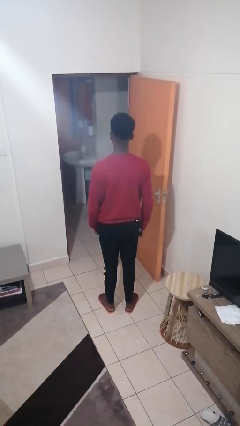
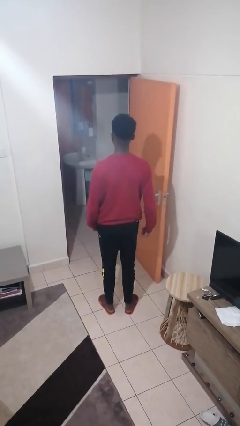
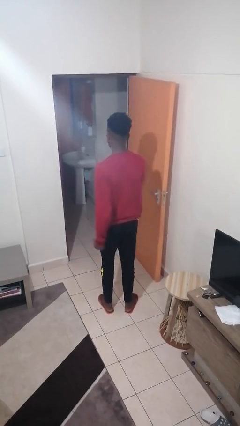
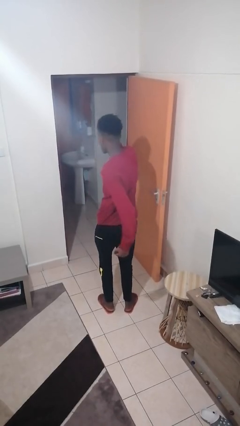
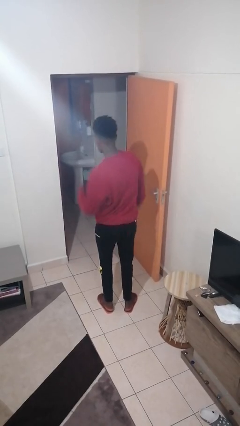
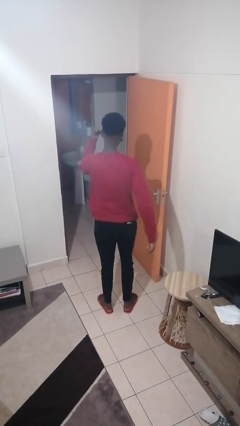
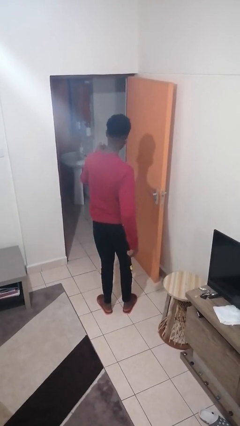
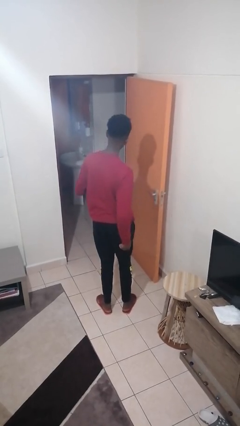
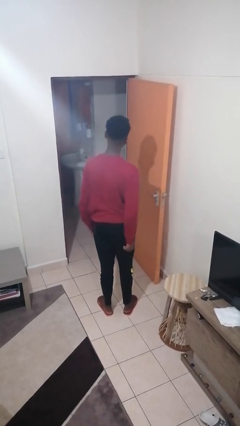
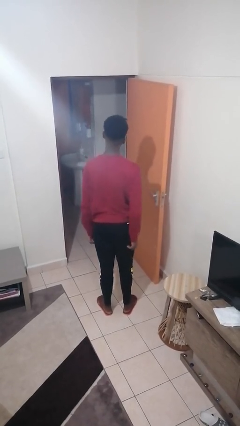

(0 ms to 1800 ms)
person punches

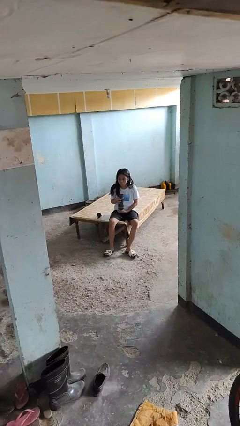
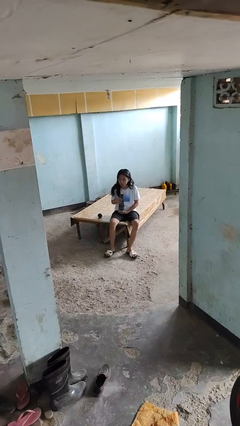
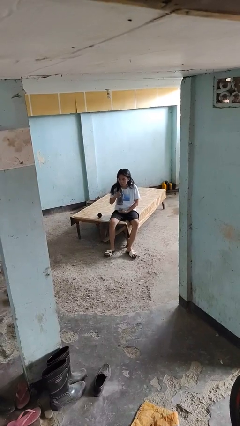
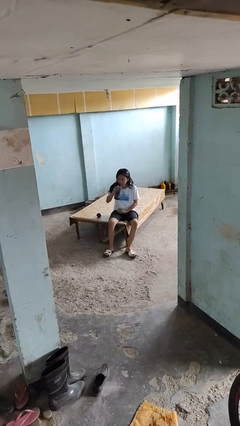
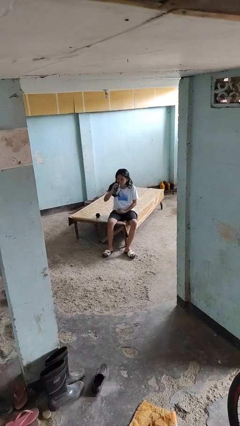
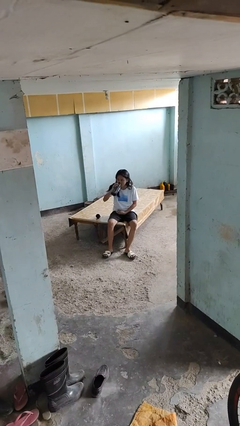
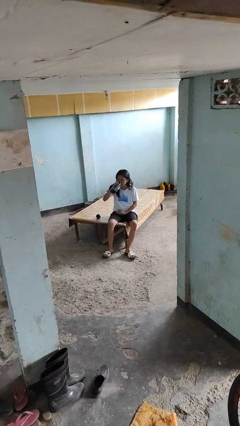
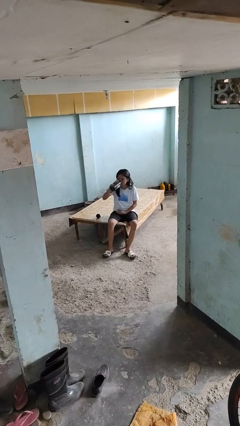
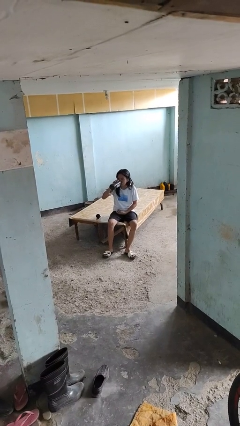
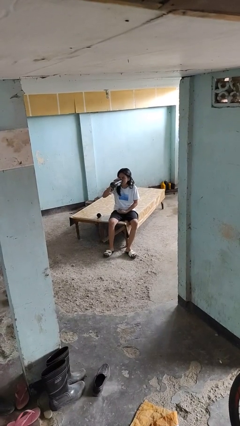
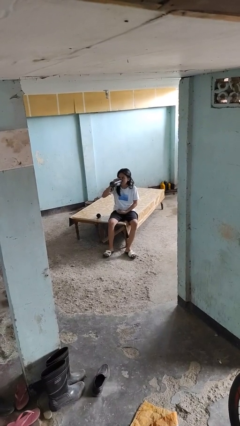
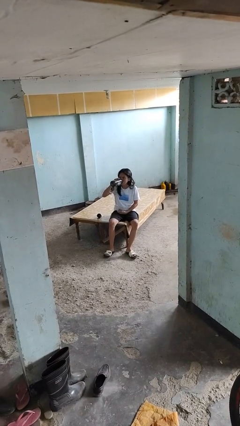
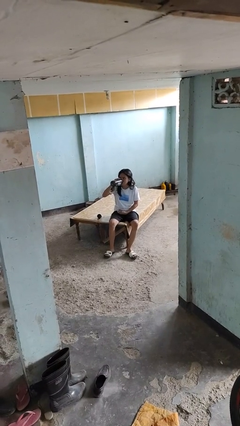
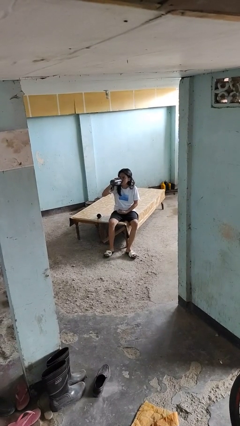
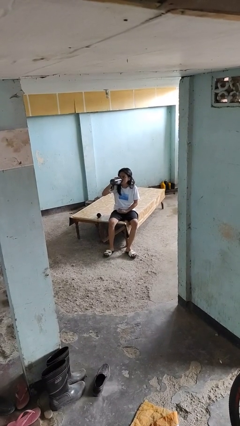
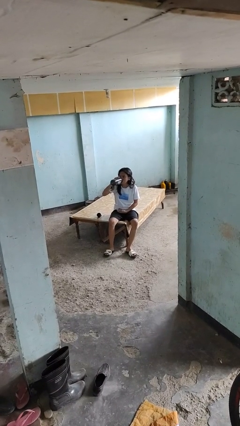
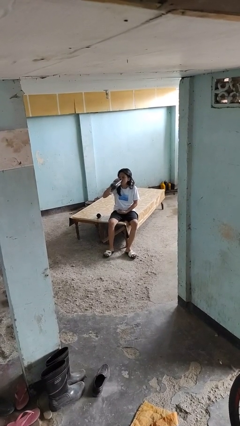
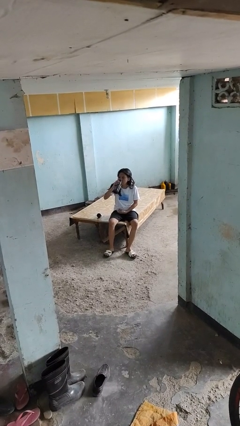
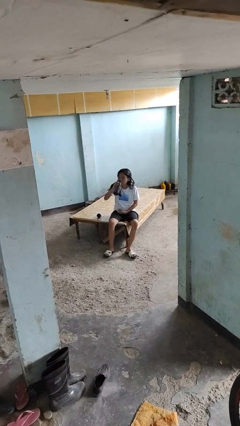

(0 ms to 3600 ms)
person drinks from bottle

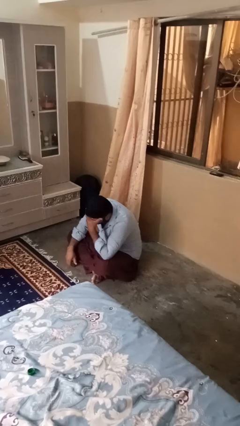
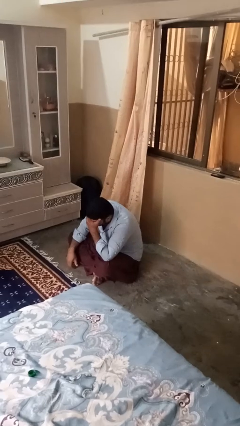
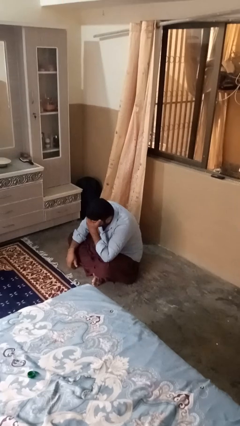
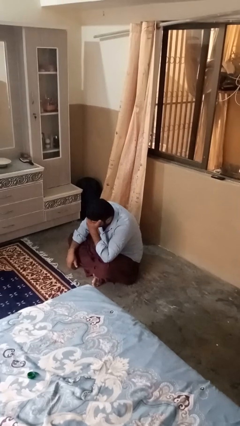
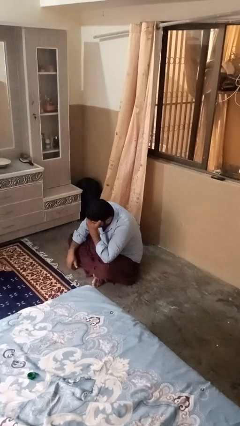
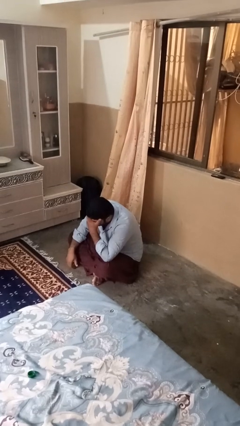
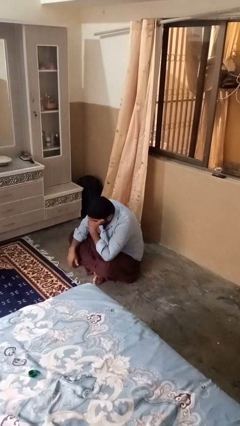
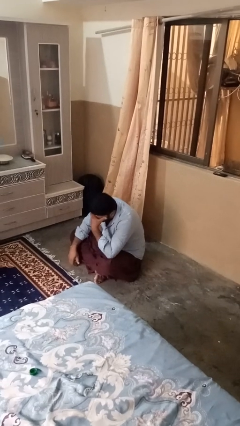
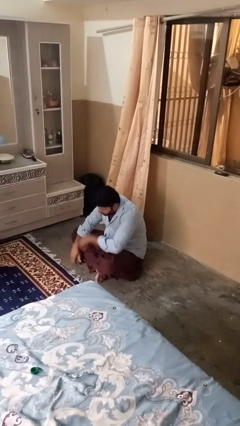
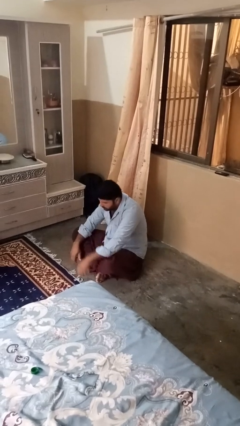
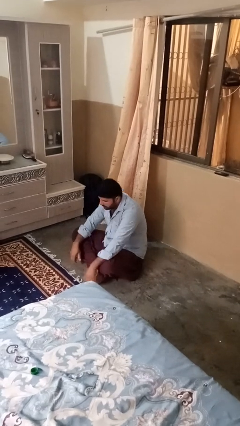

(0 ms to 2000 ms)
person covers face with hands

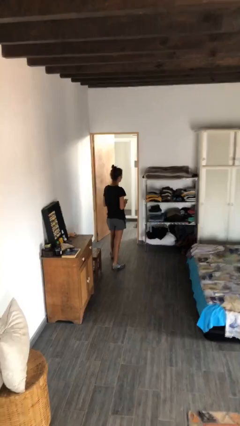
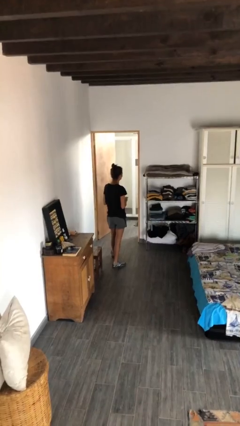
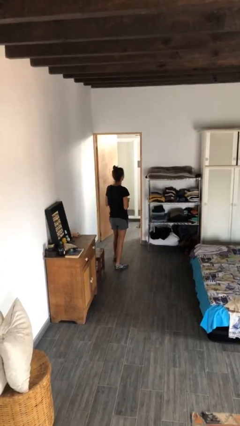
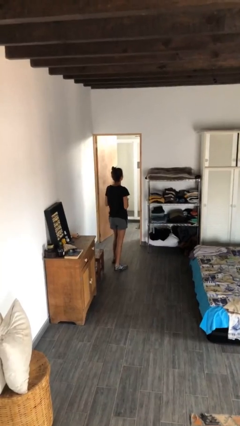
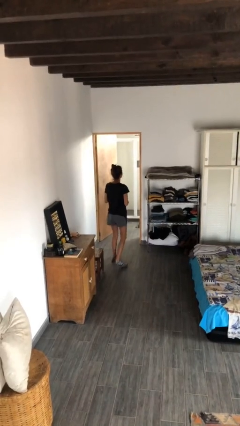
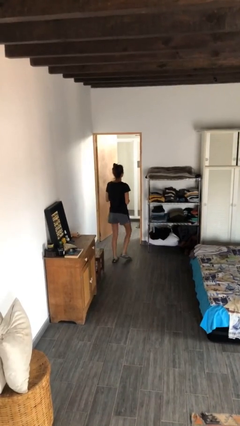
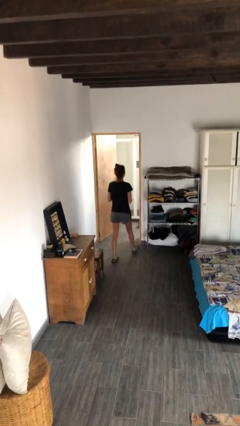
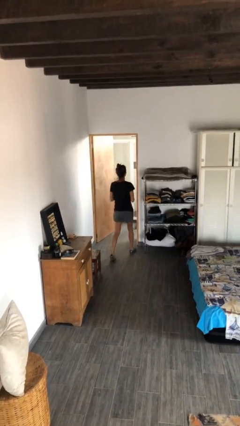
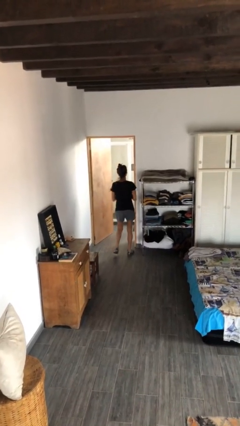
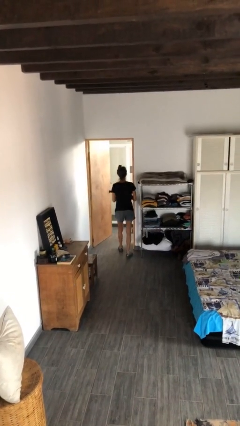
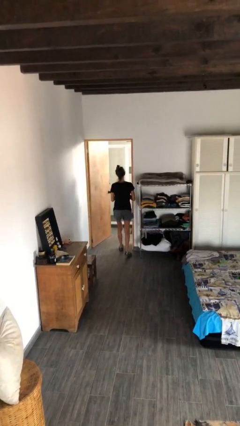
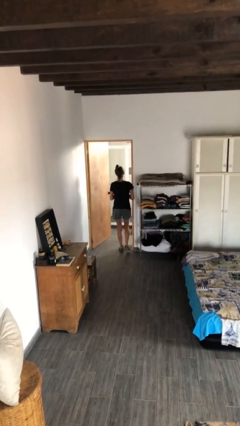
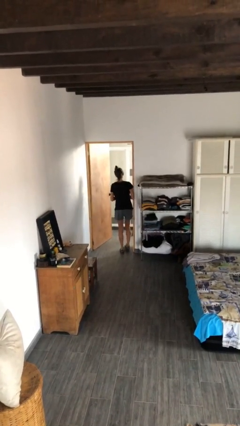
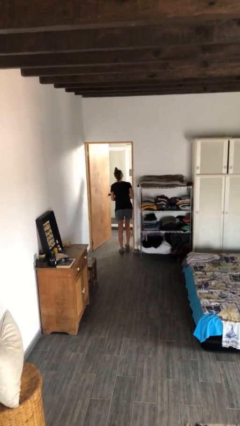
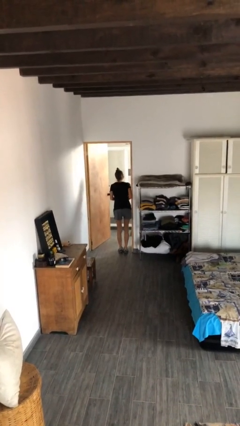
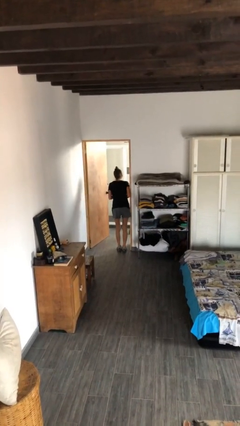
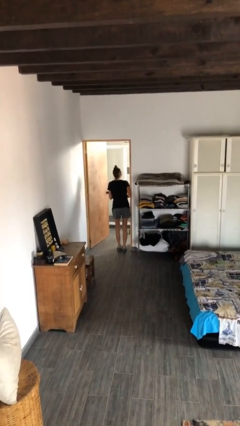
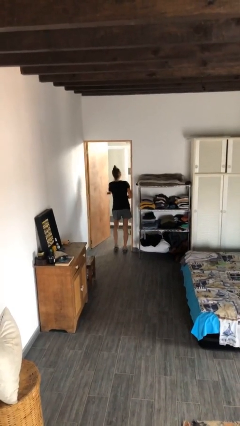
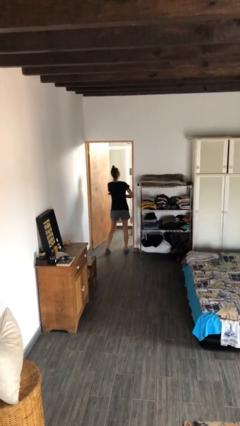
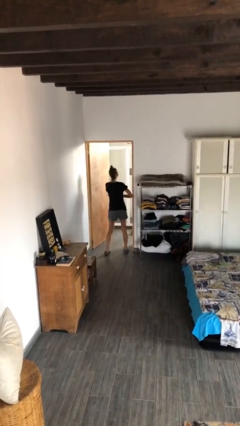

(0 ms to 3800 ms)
person bumps into wall

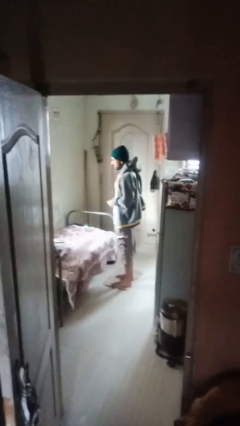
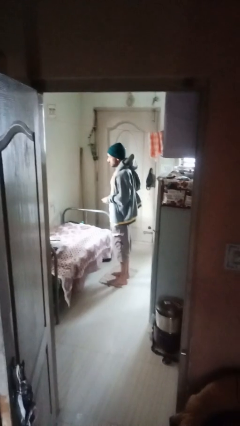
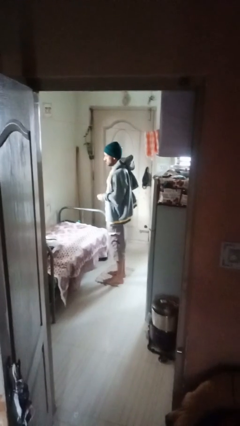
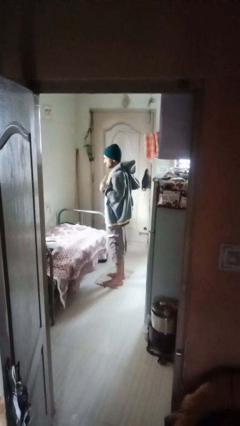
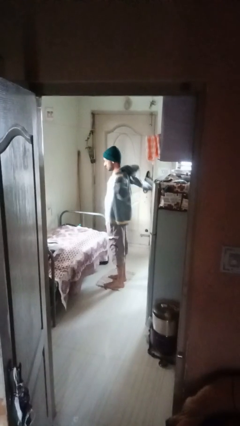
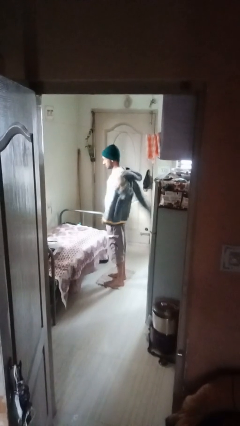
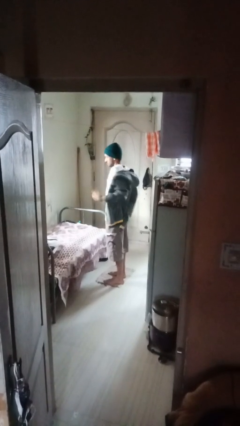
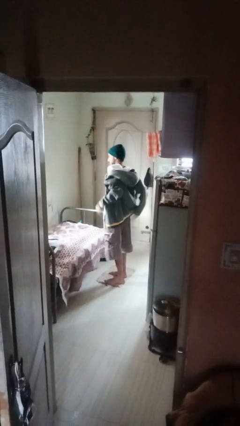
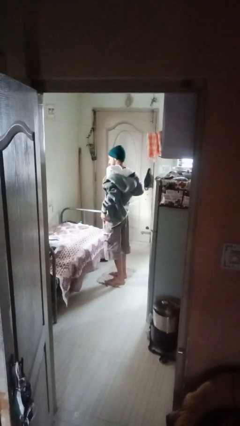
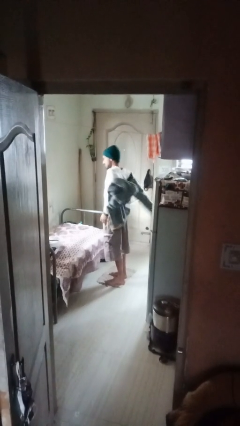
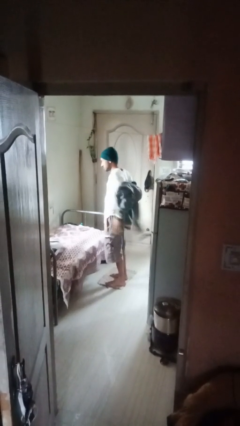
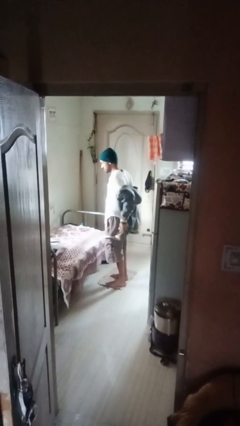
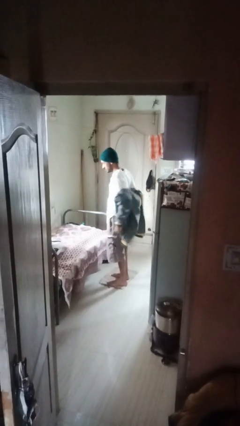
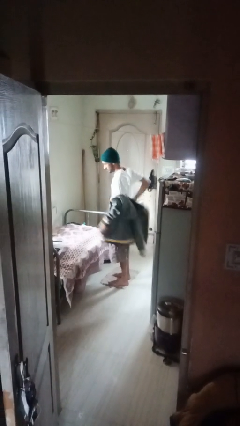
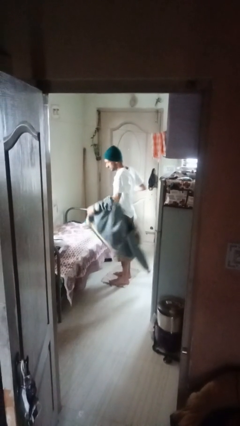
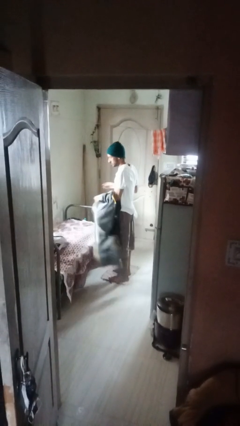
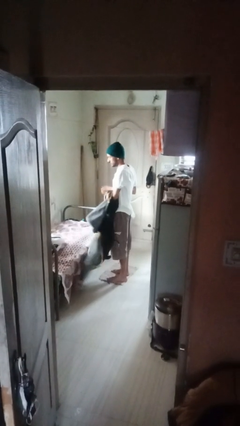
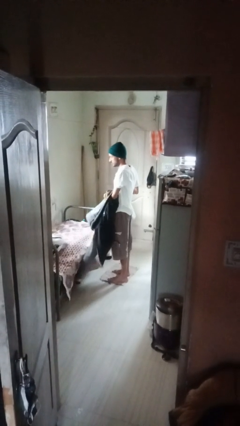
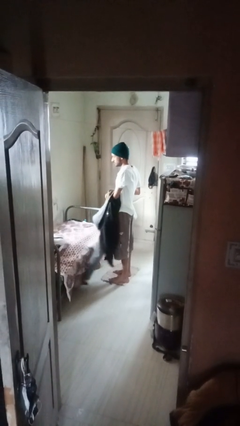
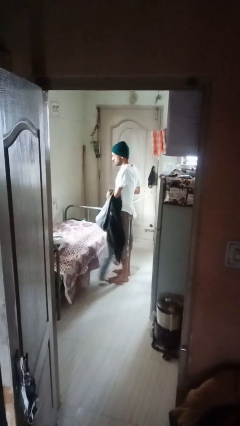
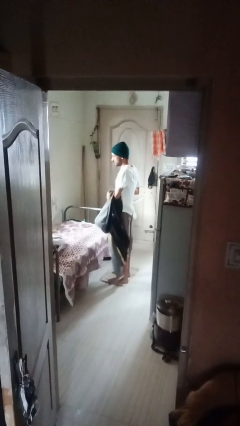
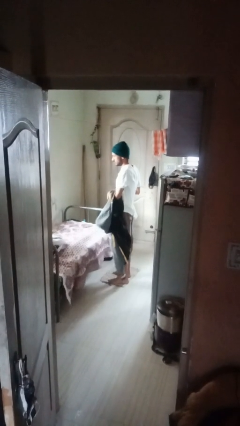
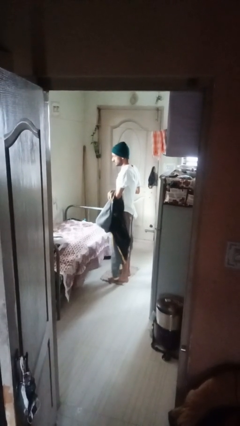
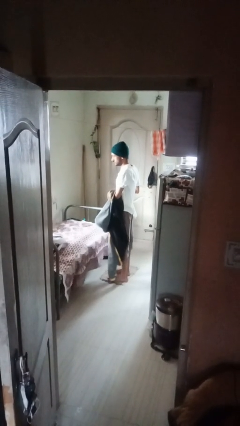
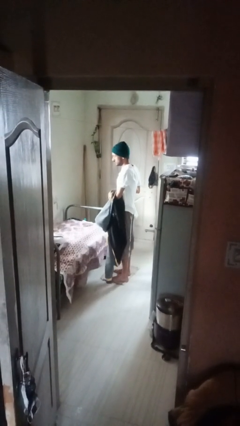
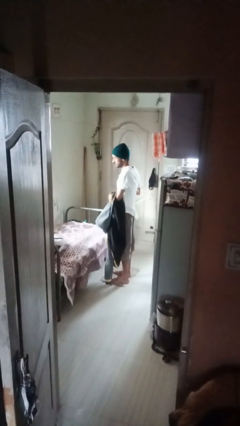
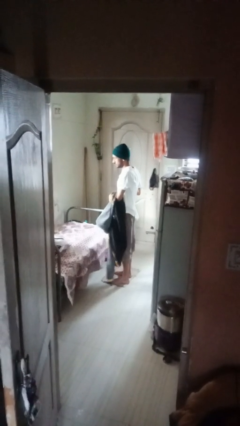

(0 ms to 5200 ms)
person takes off shirt

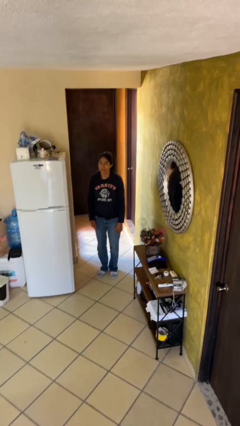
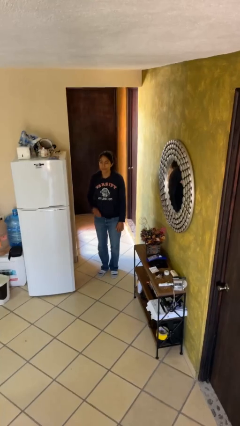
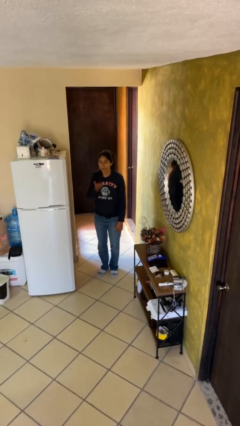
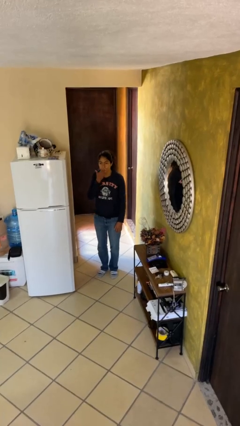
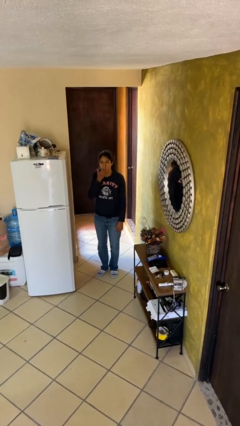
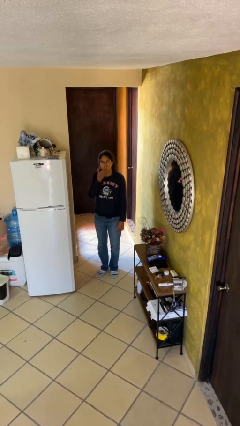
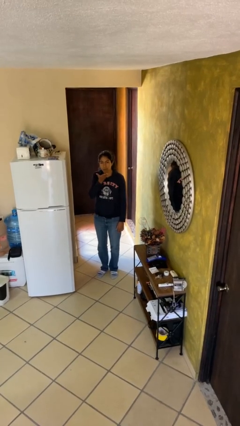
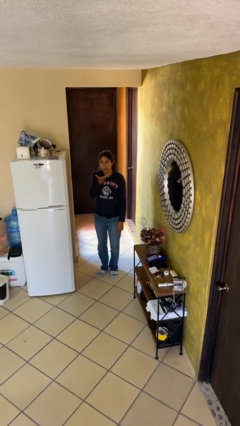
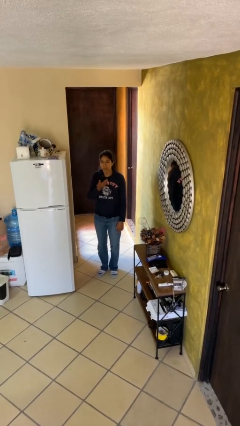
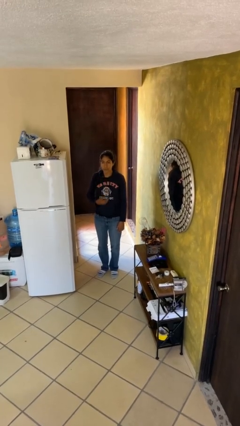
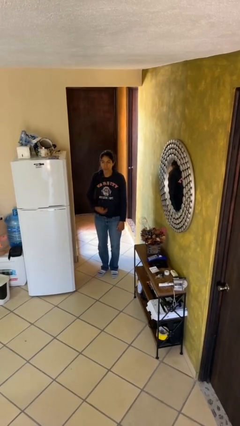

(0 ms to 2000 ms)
person gestures blow kiss
